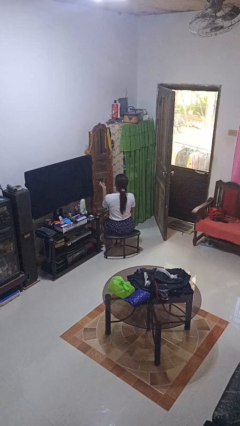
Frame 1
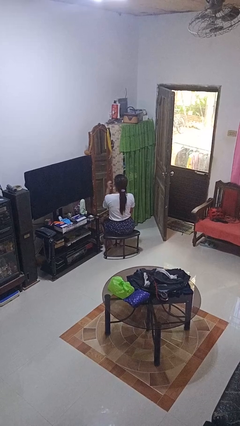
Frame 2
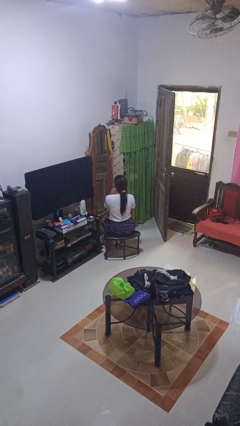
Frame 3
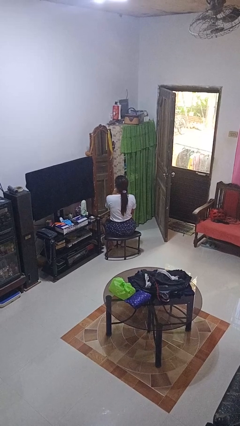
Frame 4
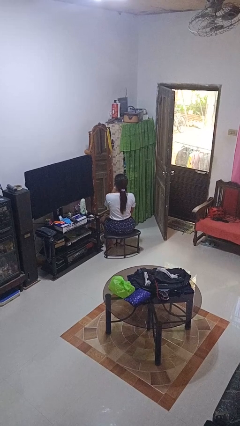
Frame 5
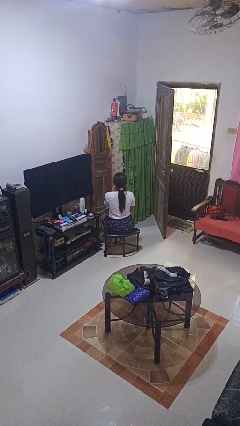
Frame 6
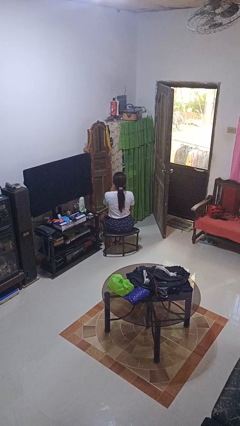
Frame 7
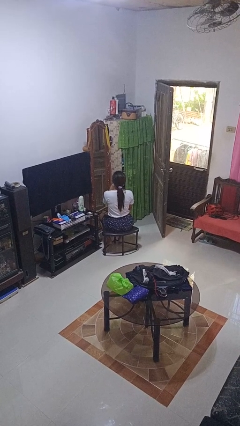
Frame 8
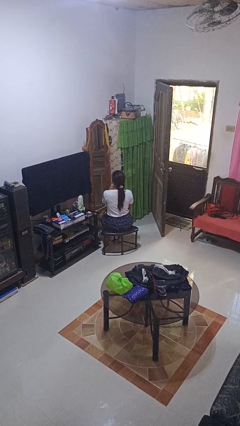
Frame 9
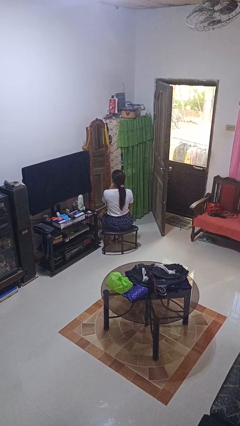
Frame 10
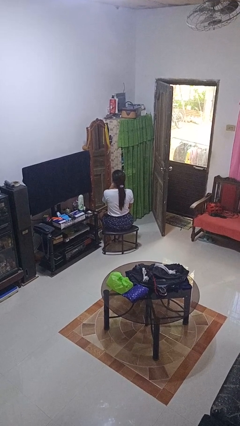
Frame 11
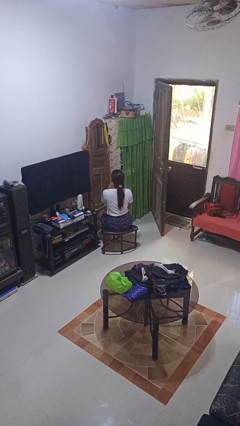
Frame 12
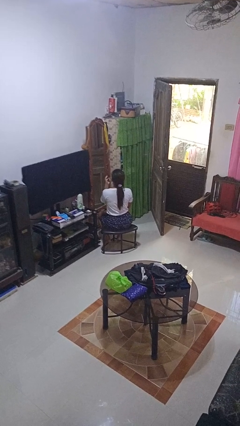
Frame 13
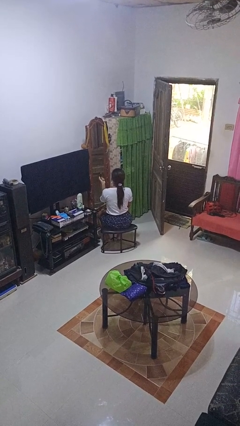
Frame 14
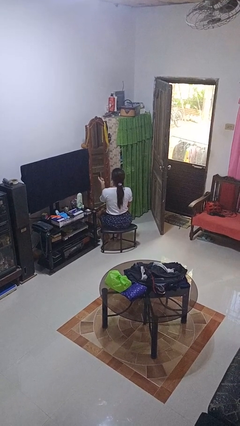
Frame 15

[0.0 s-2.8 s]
person applies lip makeup

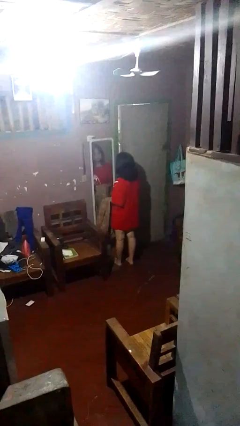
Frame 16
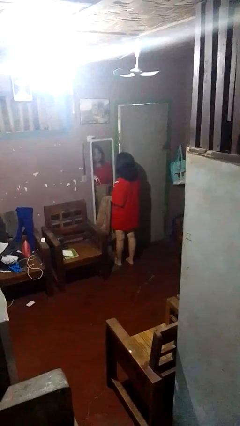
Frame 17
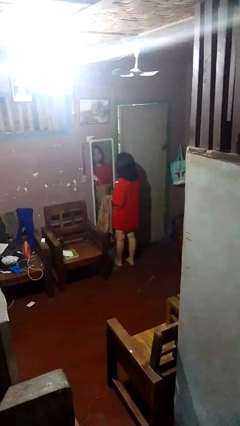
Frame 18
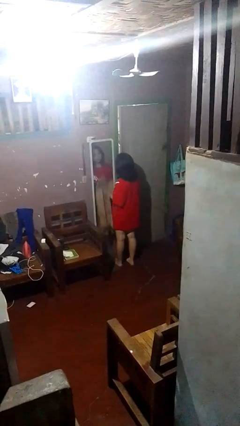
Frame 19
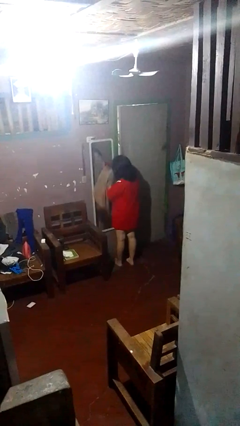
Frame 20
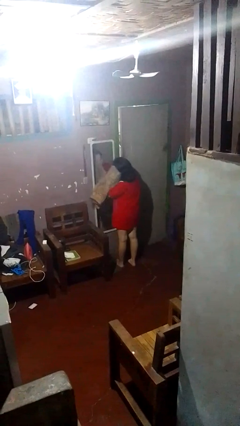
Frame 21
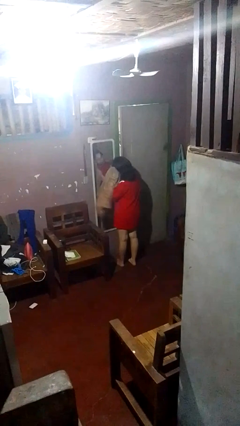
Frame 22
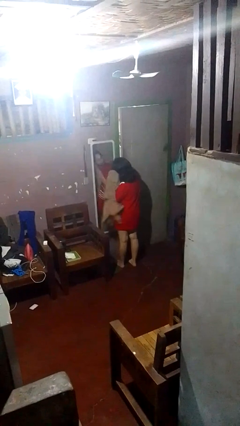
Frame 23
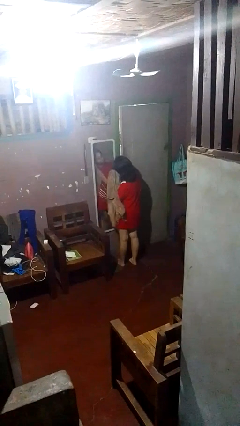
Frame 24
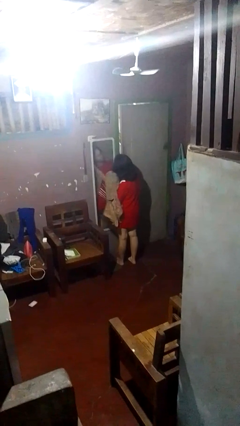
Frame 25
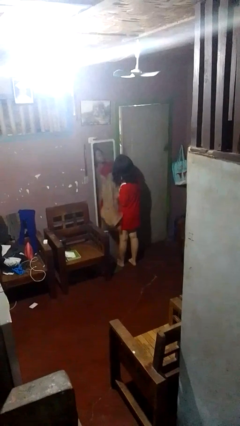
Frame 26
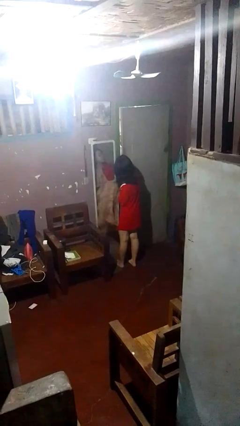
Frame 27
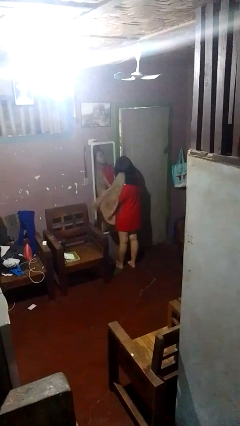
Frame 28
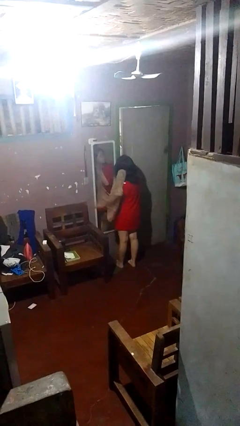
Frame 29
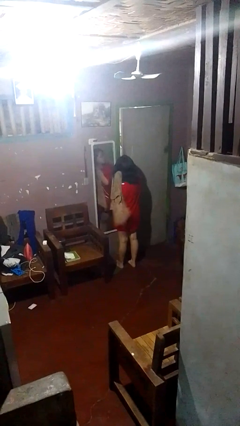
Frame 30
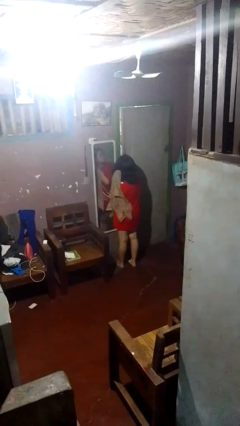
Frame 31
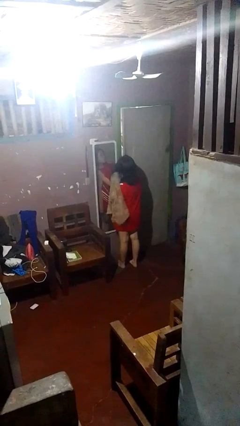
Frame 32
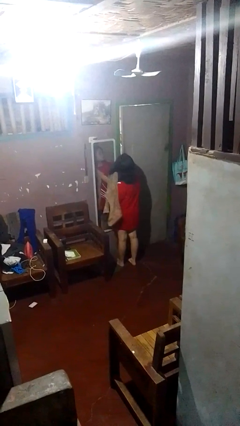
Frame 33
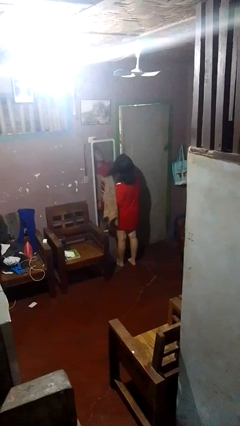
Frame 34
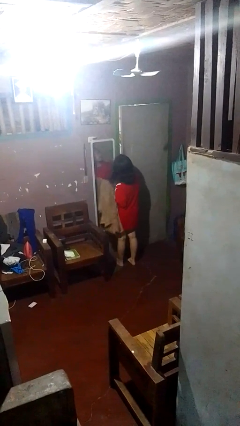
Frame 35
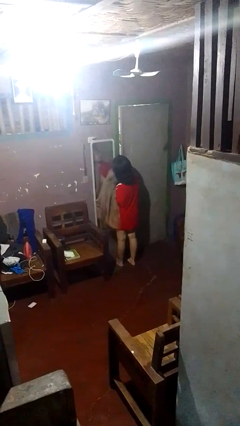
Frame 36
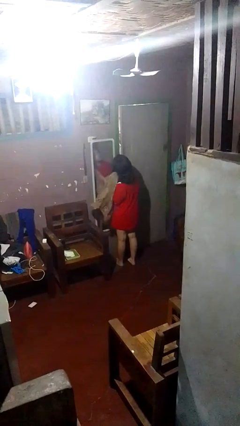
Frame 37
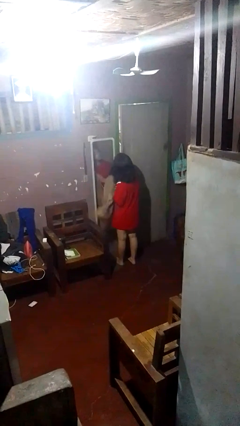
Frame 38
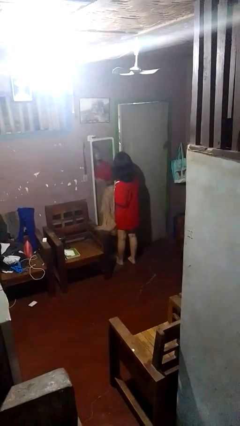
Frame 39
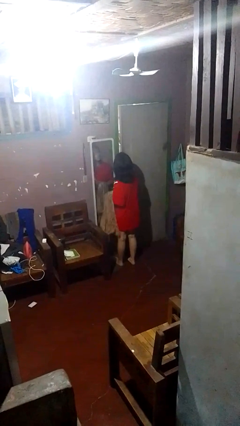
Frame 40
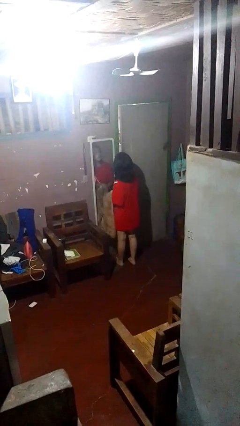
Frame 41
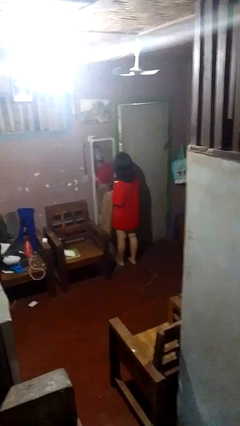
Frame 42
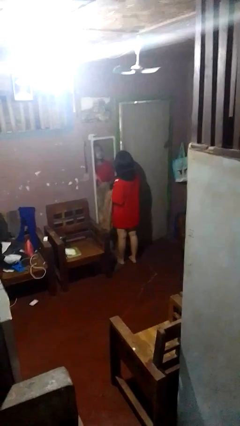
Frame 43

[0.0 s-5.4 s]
person dries hair with towel

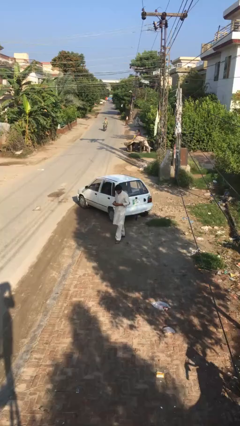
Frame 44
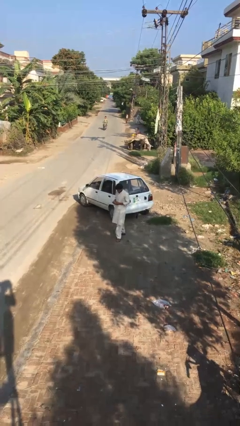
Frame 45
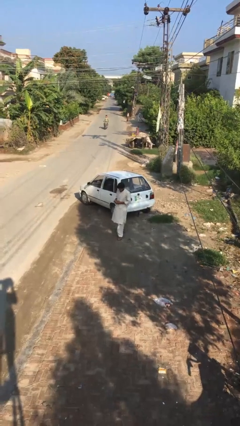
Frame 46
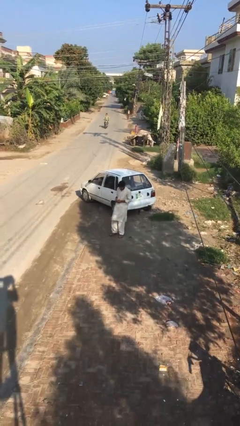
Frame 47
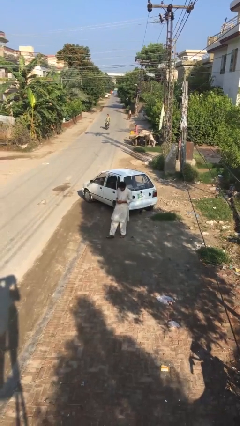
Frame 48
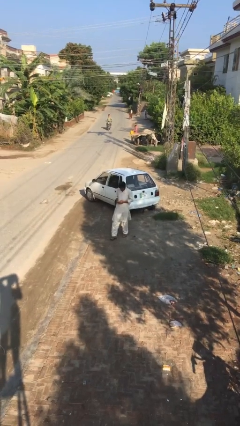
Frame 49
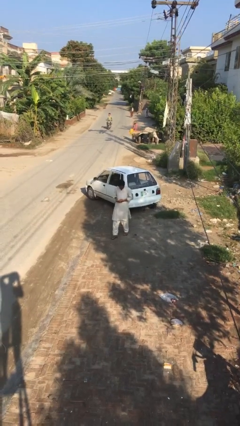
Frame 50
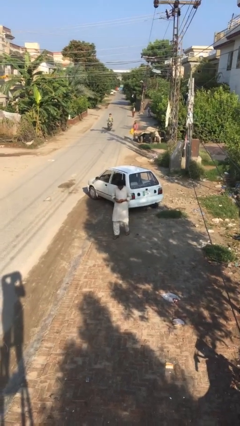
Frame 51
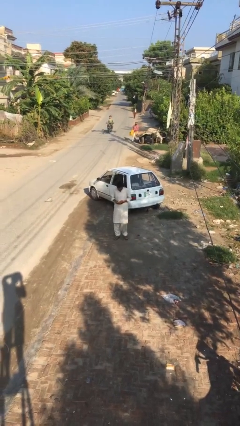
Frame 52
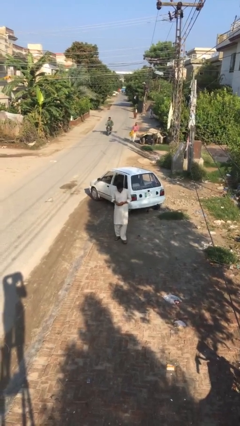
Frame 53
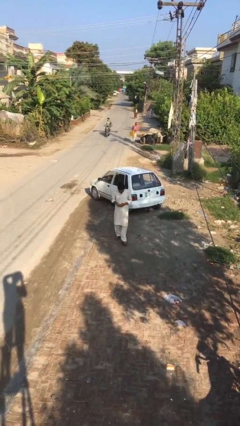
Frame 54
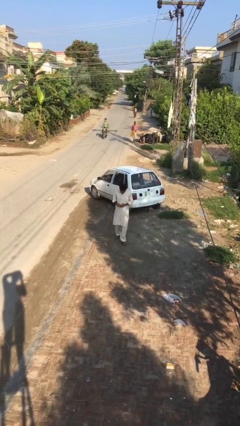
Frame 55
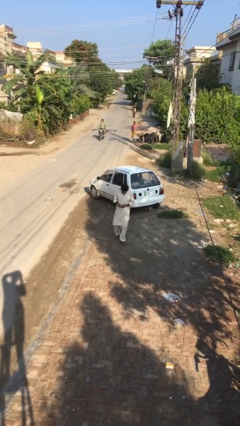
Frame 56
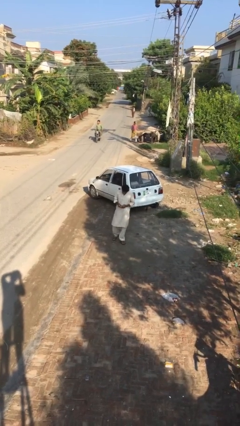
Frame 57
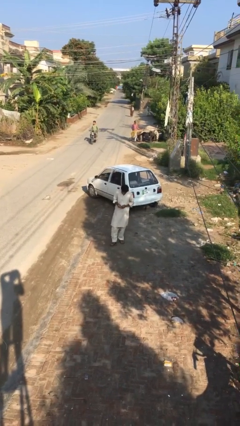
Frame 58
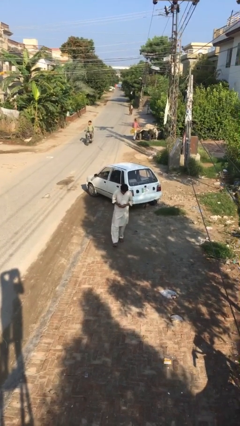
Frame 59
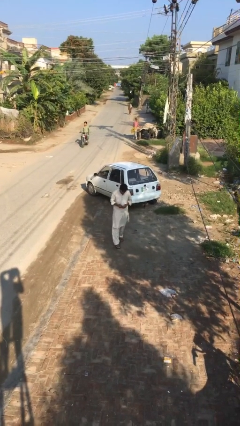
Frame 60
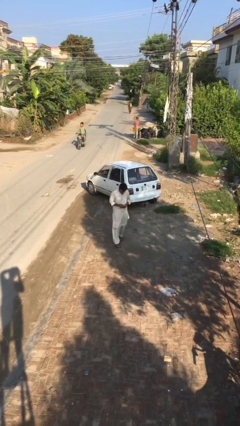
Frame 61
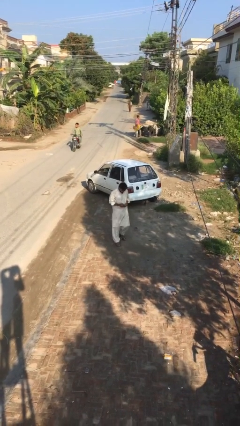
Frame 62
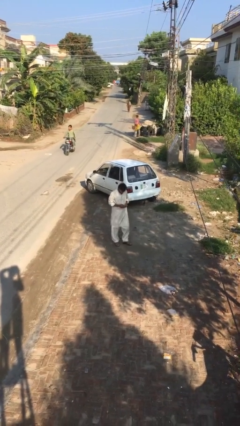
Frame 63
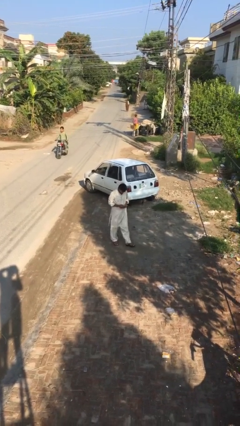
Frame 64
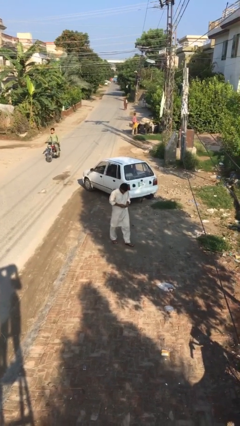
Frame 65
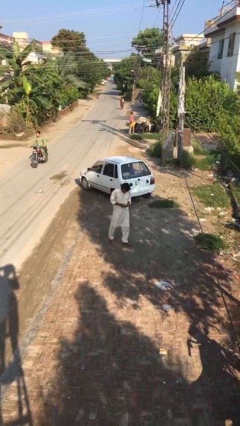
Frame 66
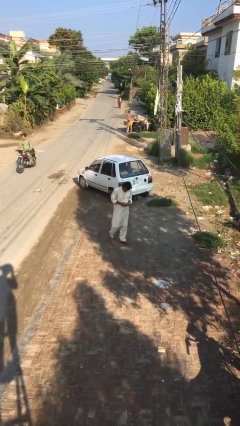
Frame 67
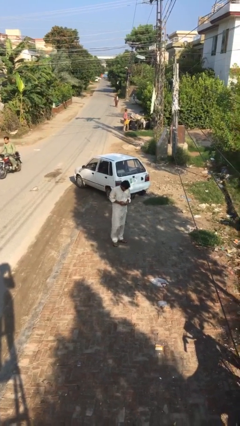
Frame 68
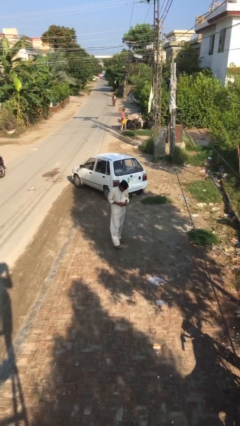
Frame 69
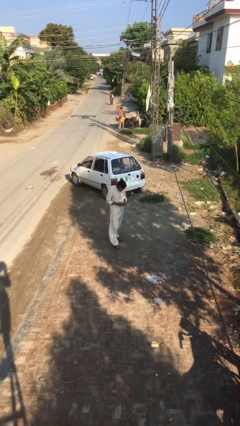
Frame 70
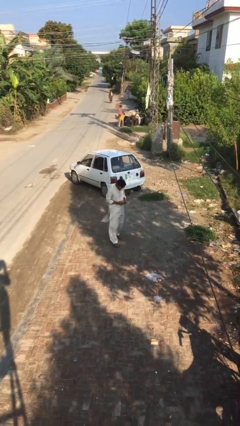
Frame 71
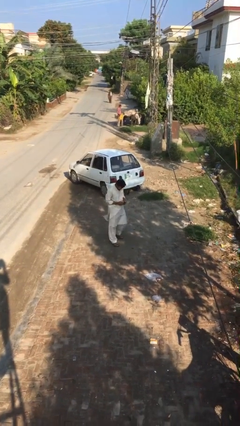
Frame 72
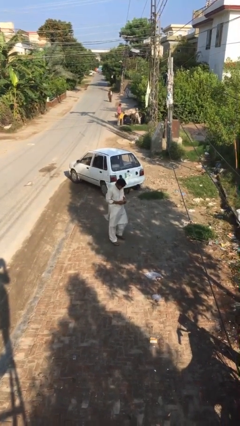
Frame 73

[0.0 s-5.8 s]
person texts on phone

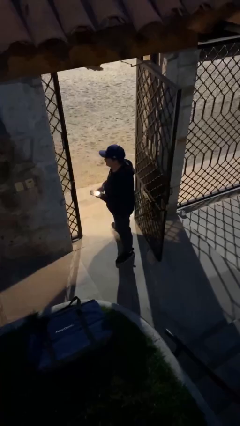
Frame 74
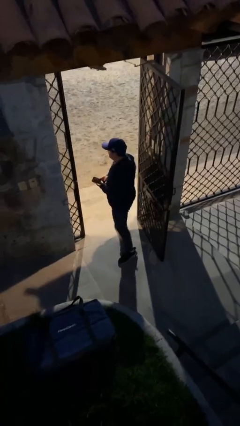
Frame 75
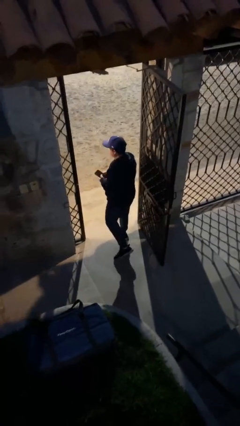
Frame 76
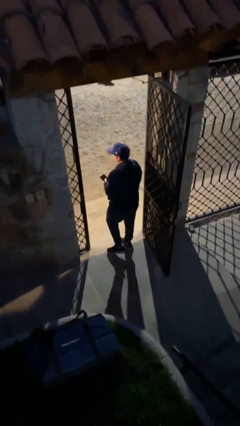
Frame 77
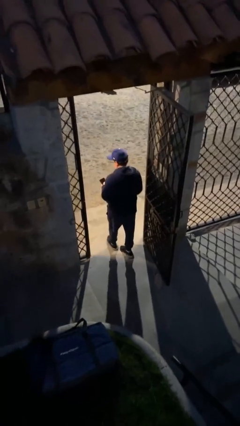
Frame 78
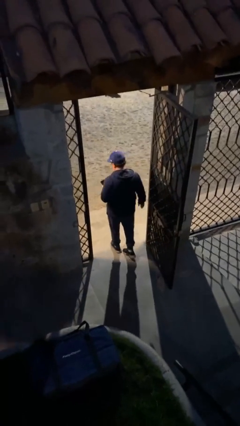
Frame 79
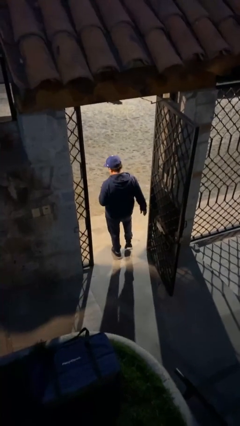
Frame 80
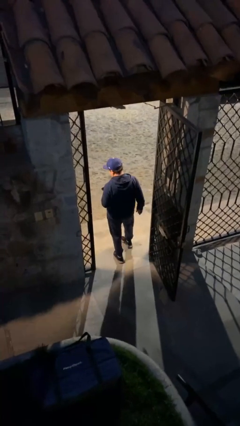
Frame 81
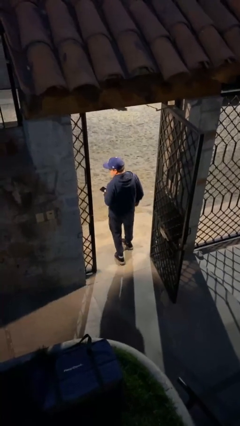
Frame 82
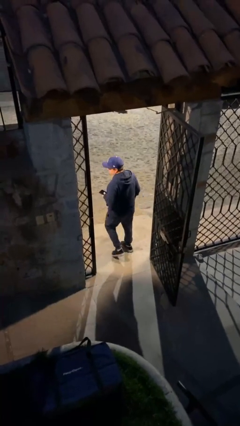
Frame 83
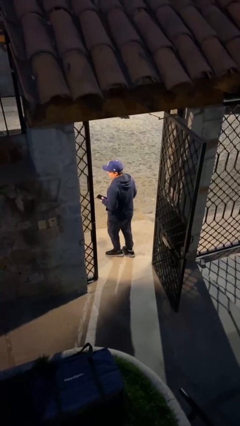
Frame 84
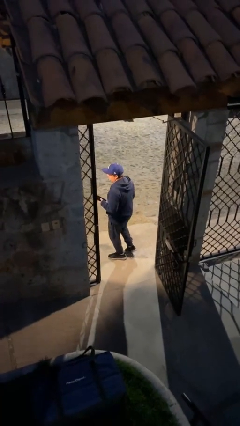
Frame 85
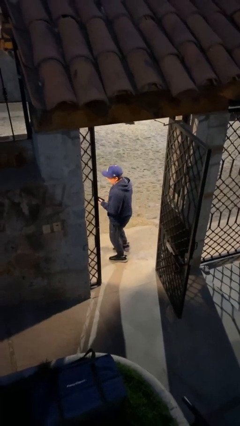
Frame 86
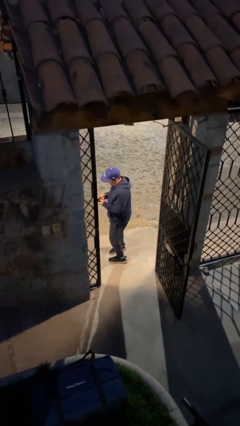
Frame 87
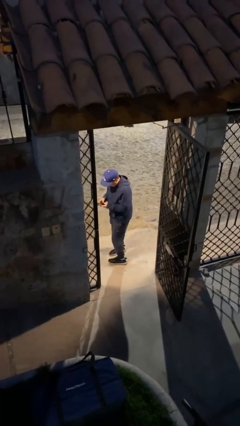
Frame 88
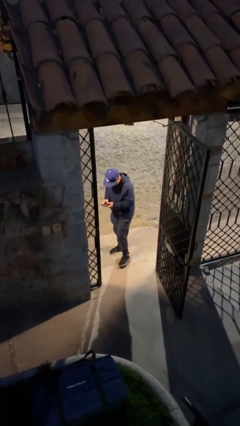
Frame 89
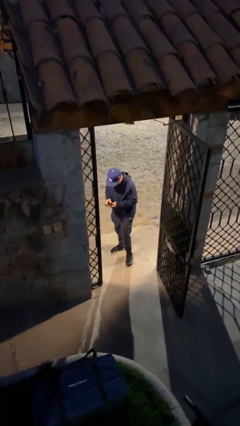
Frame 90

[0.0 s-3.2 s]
person exits scene through structure

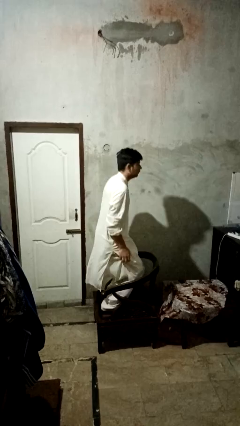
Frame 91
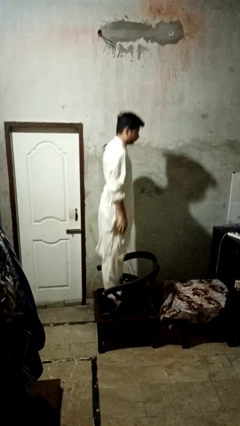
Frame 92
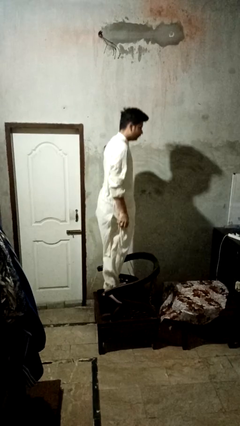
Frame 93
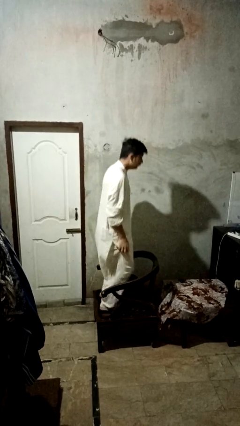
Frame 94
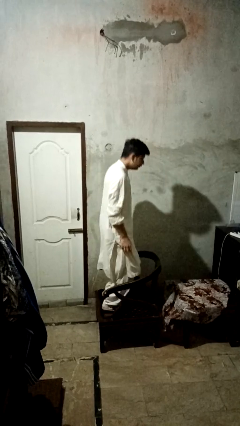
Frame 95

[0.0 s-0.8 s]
person jumps on couch
